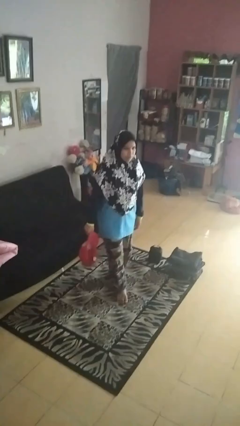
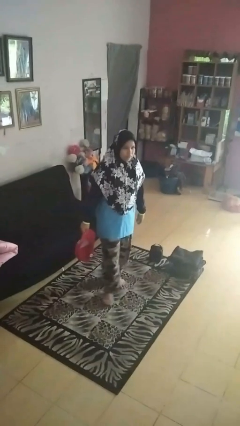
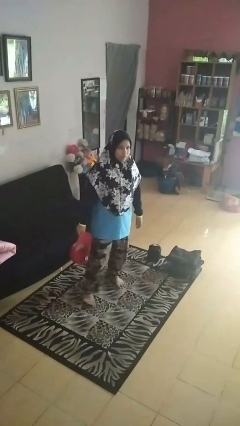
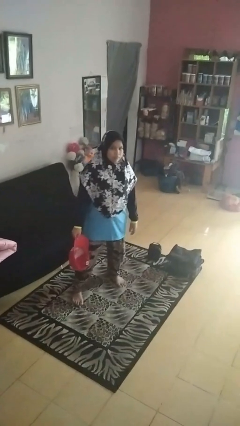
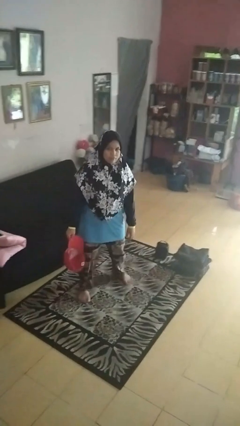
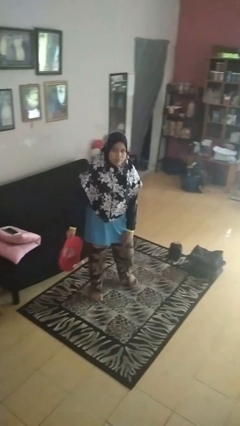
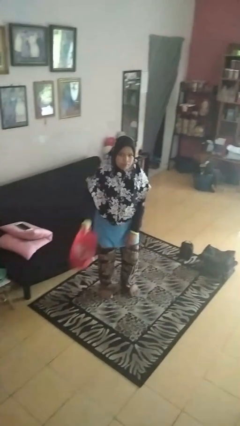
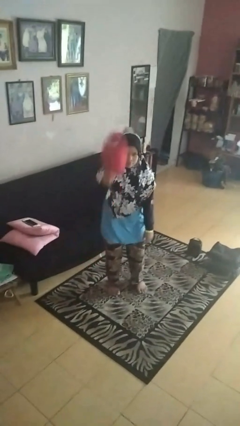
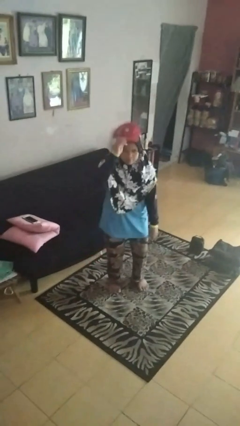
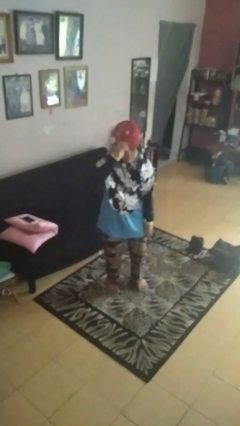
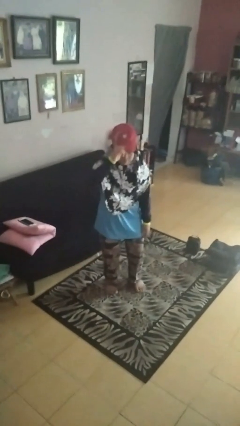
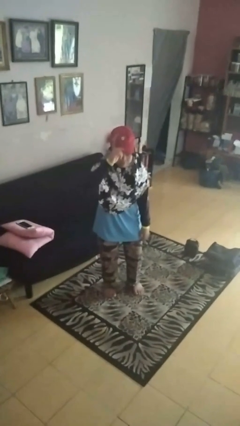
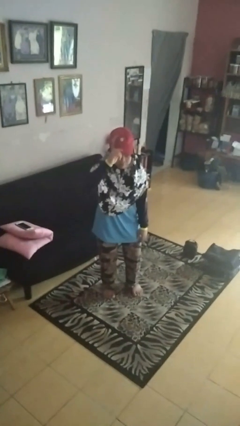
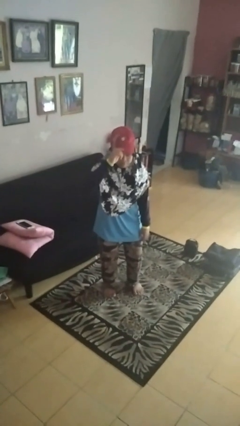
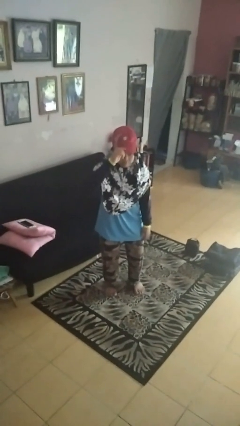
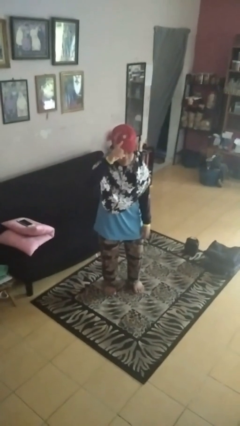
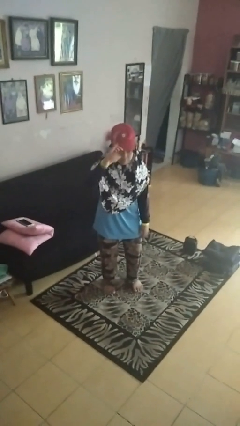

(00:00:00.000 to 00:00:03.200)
person puts on hat

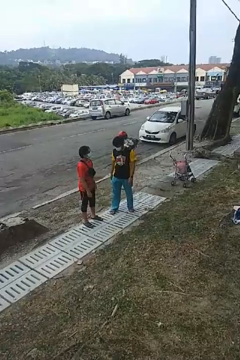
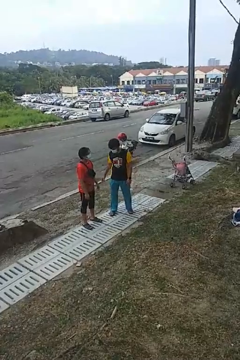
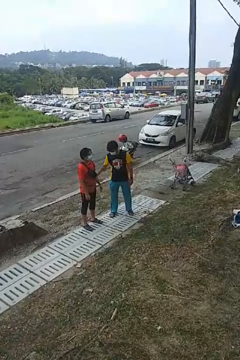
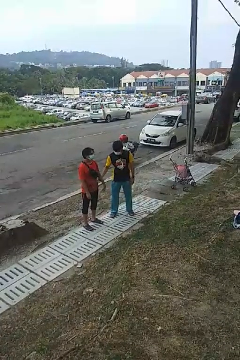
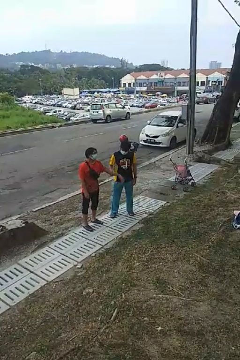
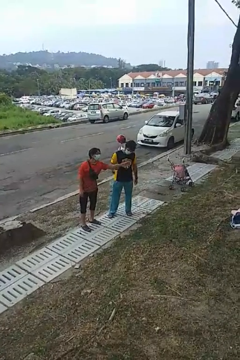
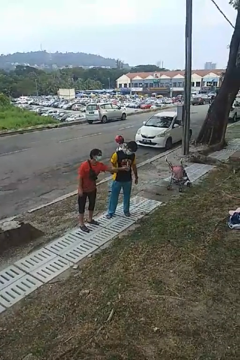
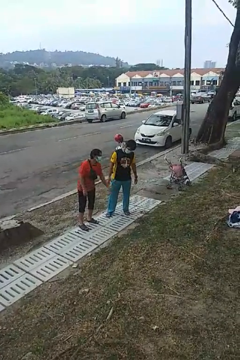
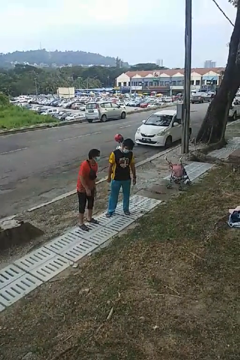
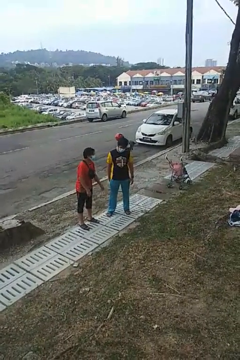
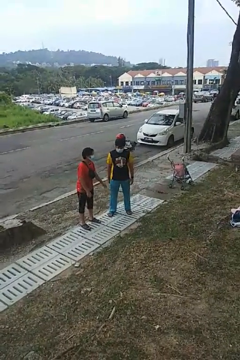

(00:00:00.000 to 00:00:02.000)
person grabs person by forearm

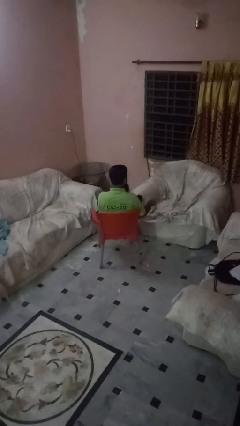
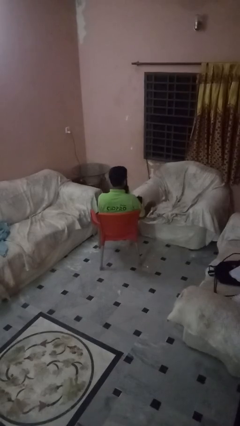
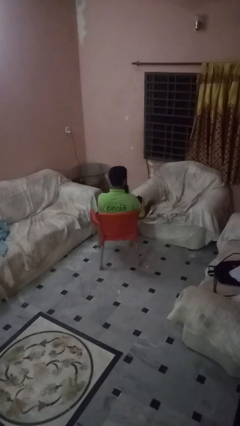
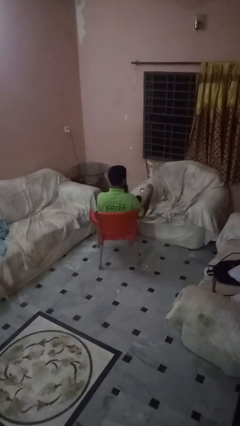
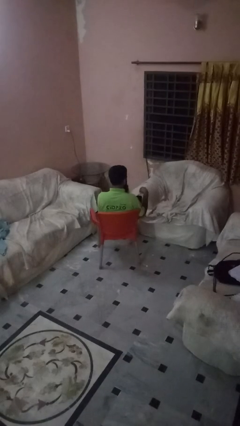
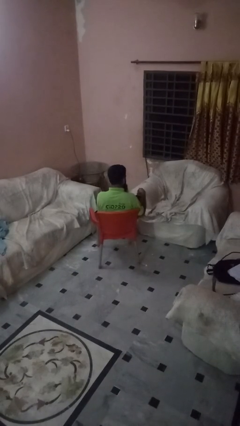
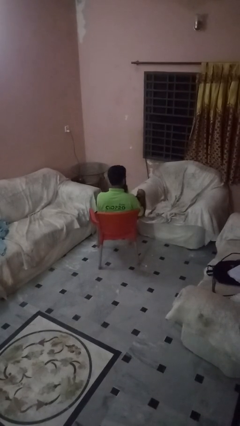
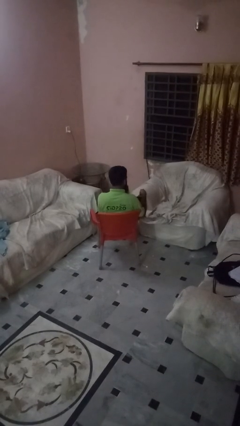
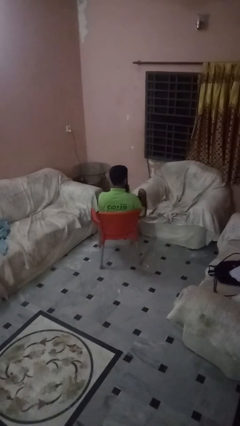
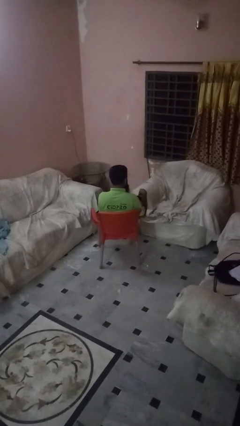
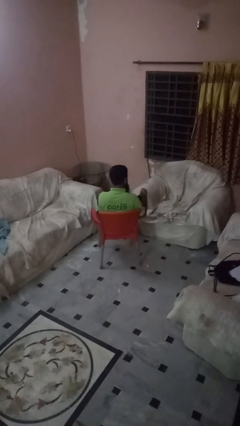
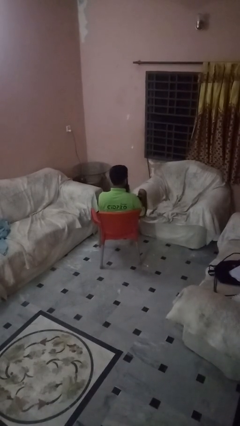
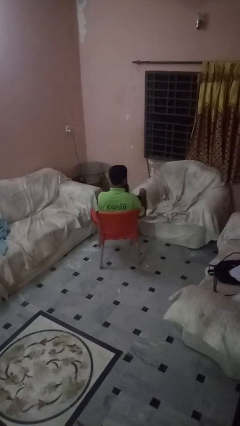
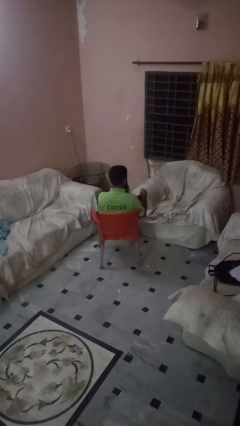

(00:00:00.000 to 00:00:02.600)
person stirs mug

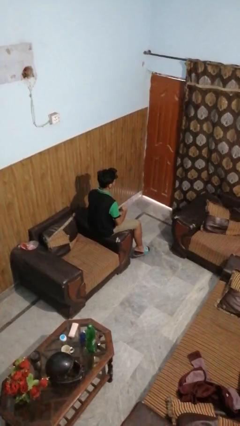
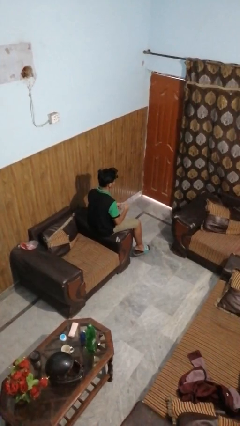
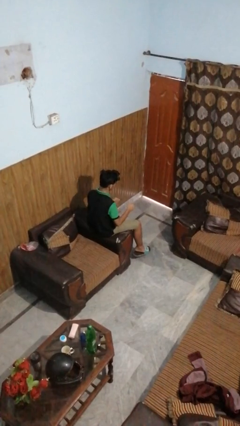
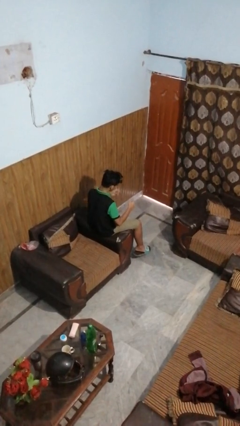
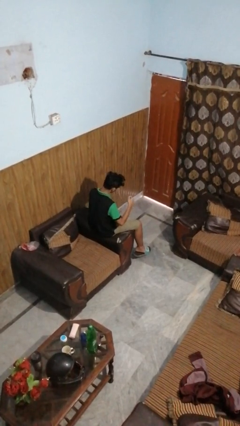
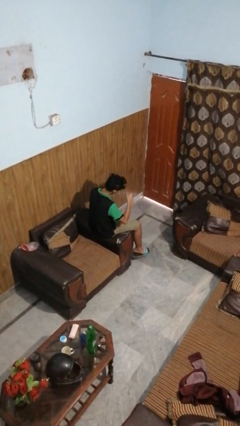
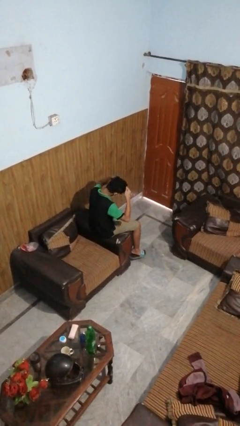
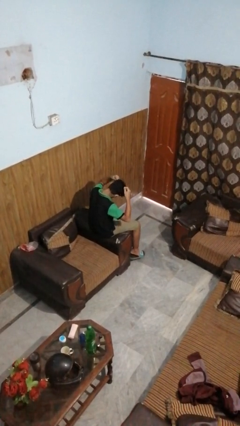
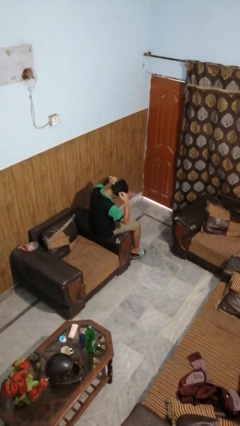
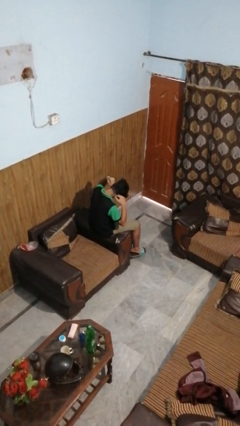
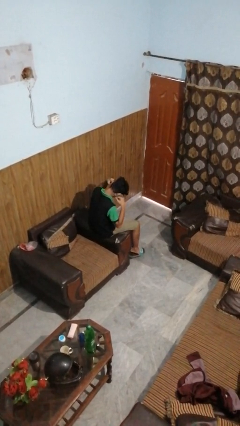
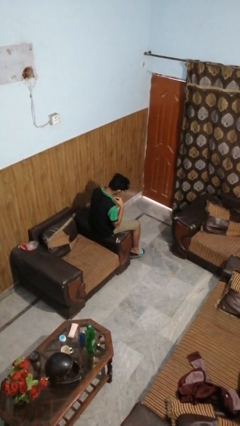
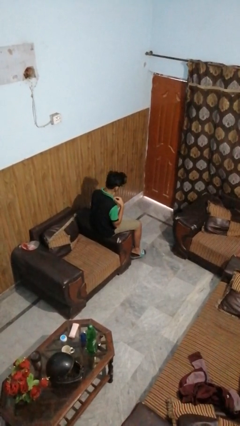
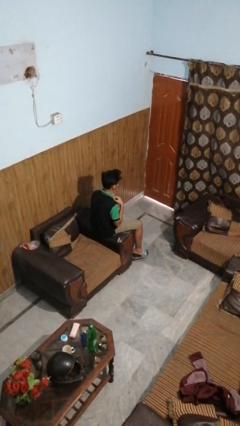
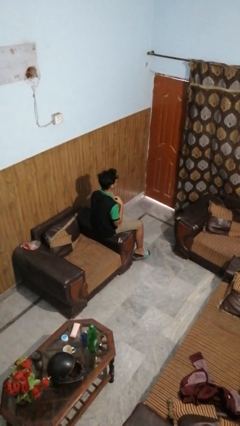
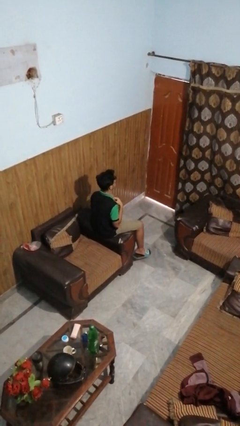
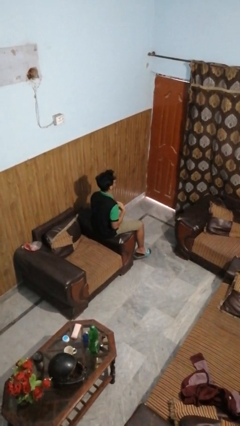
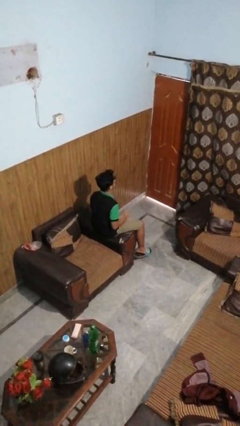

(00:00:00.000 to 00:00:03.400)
person puts on necklace

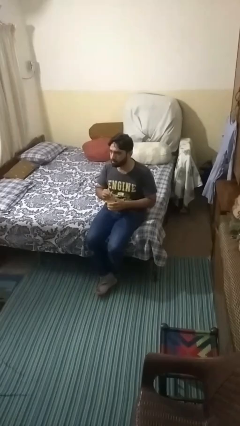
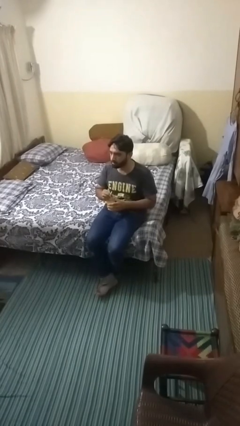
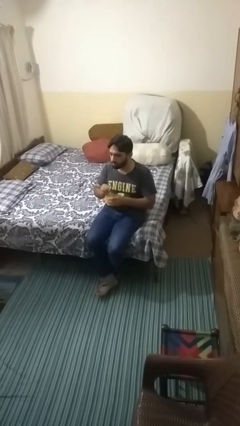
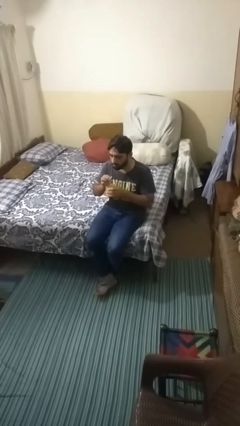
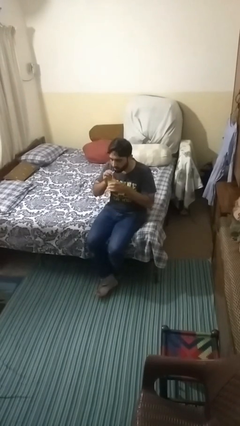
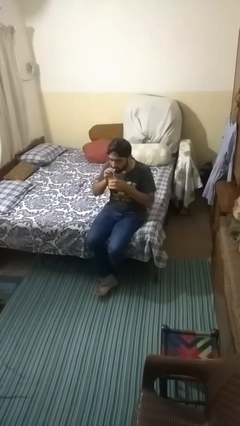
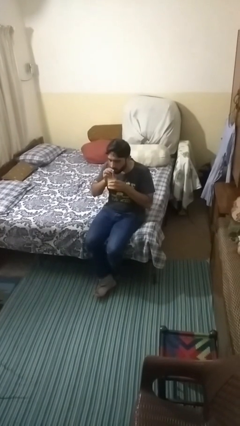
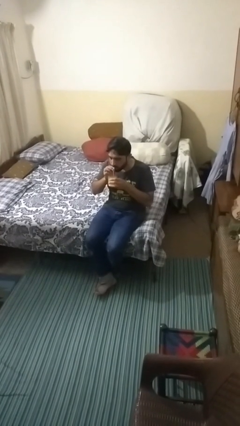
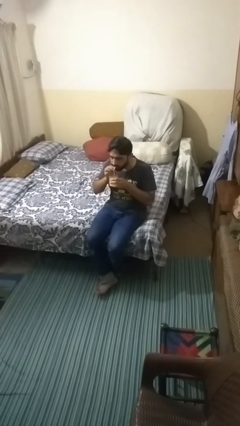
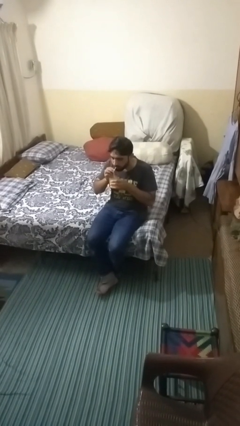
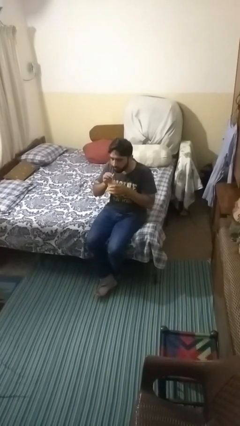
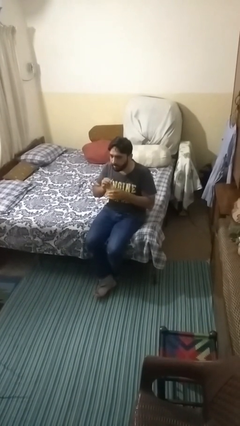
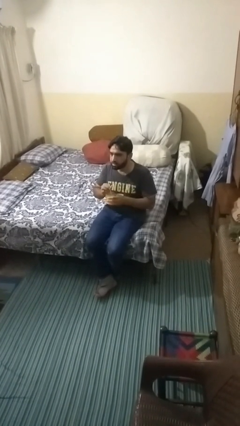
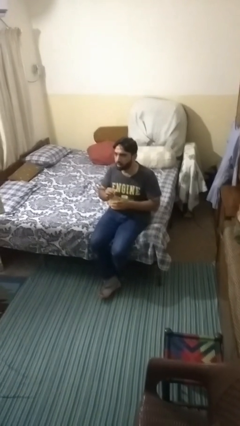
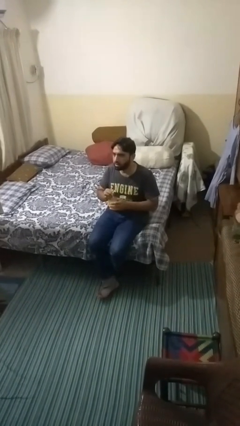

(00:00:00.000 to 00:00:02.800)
person drinks from straw

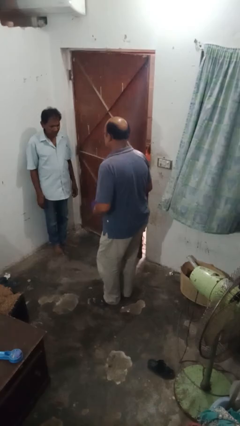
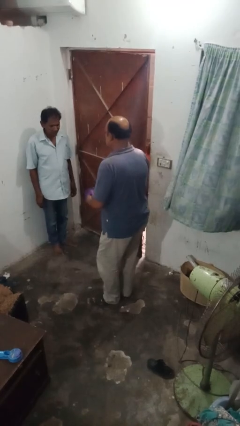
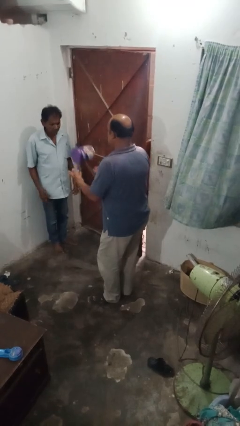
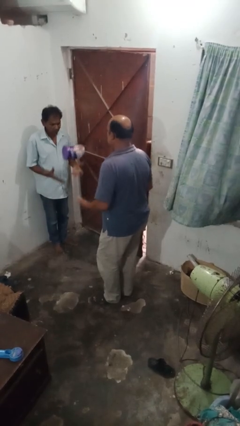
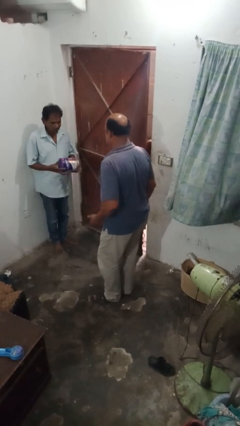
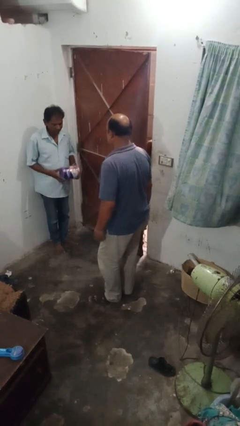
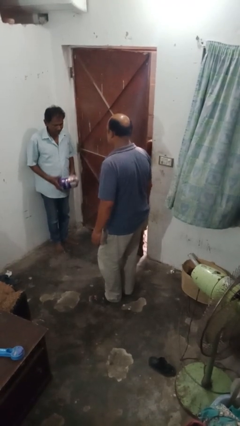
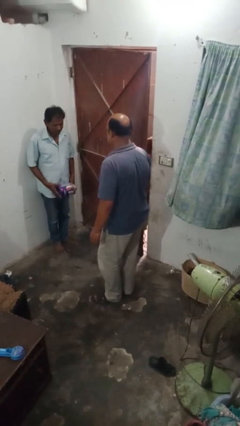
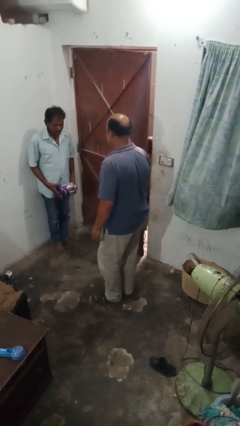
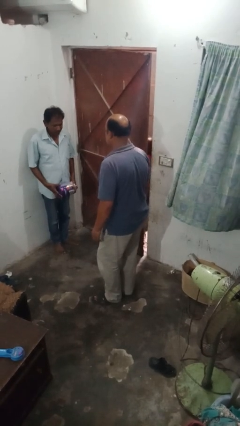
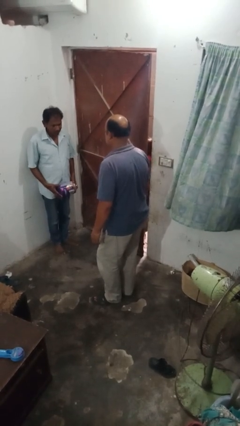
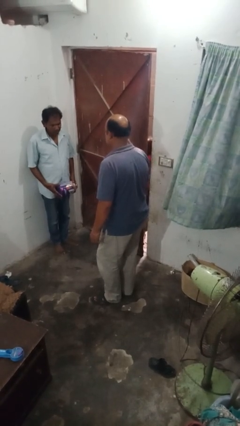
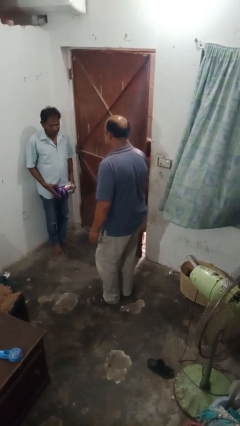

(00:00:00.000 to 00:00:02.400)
person throws object to person

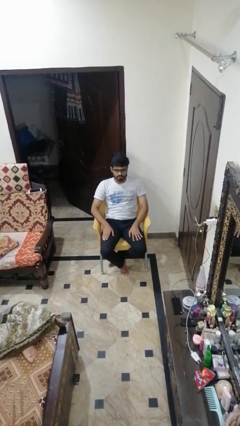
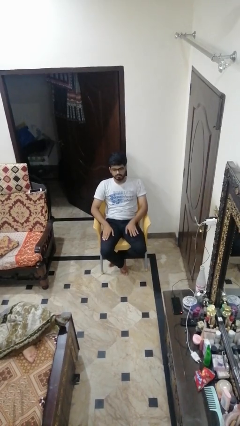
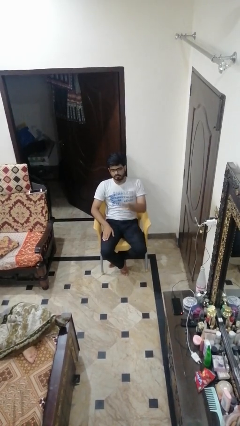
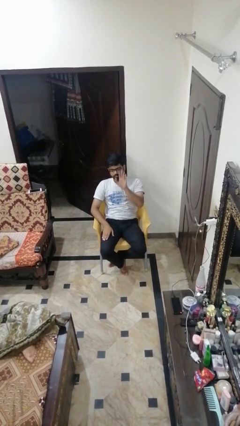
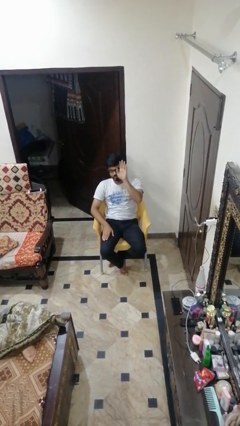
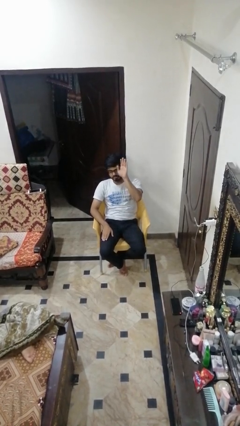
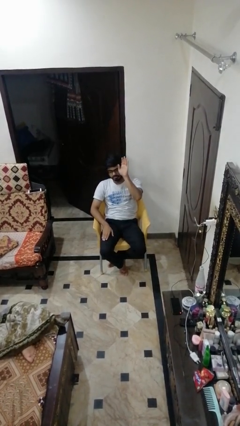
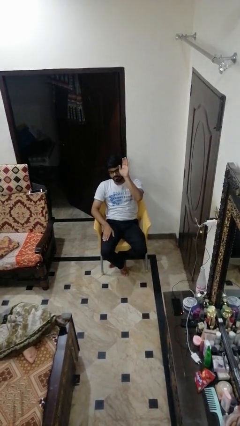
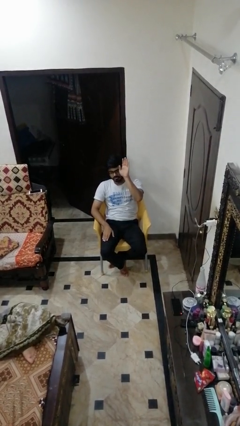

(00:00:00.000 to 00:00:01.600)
person gestures raise hand
